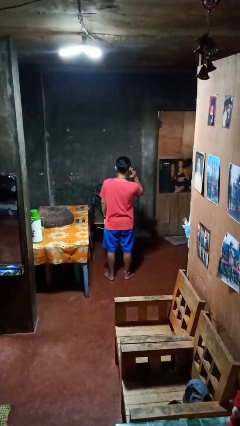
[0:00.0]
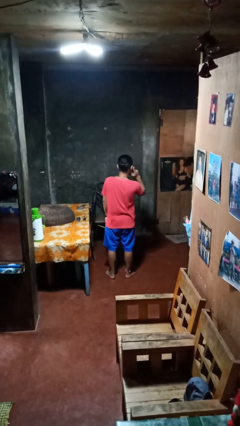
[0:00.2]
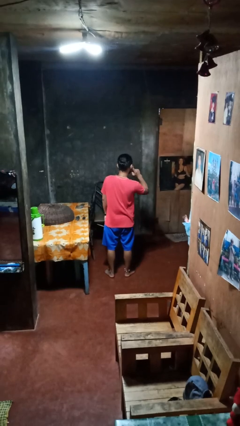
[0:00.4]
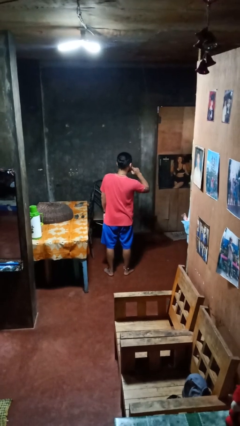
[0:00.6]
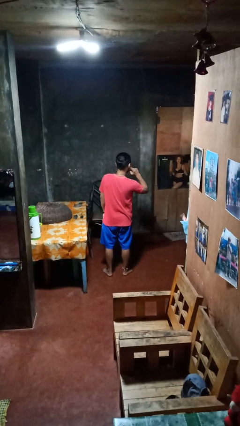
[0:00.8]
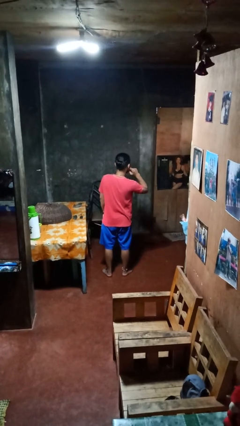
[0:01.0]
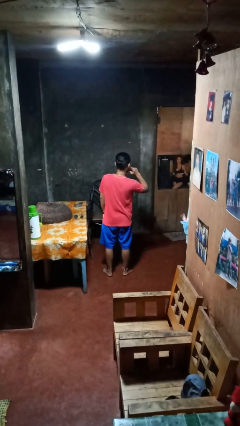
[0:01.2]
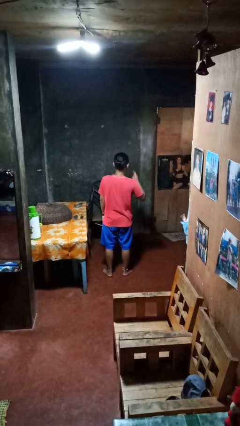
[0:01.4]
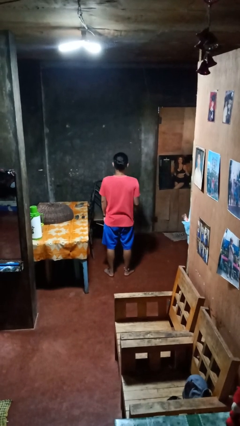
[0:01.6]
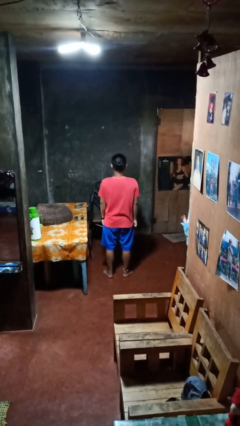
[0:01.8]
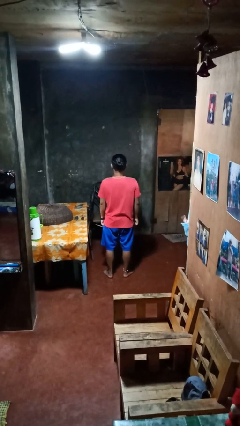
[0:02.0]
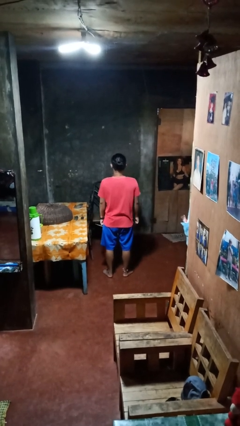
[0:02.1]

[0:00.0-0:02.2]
person gestures listen closely

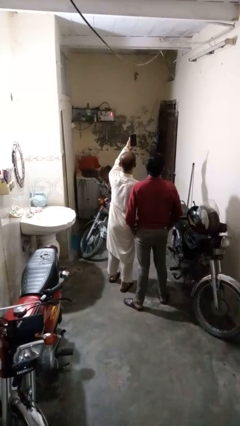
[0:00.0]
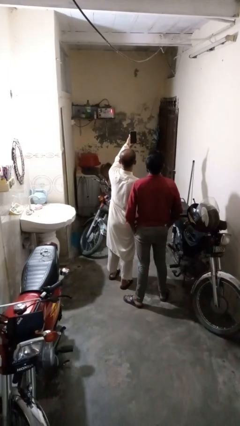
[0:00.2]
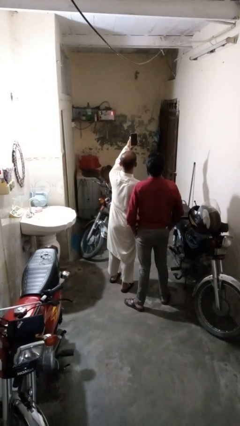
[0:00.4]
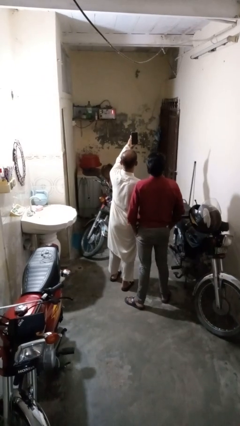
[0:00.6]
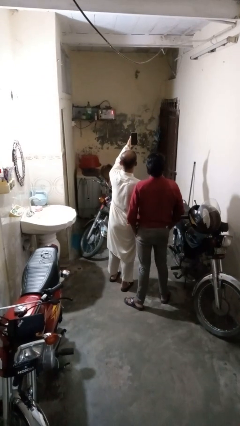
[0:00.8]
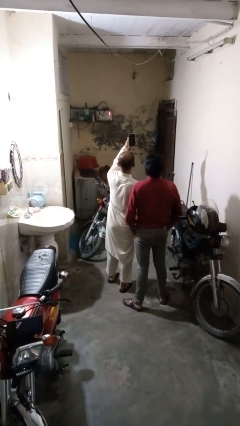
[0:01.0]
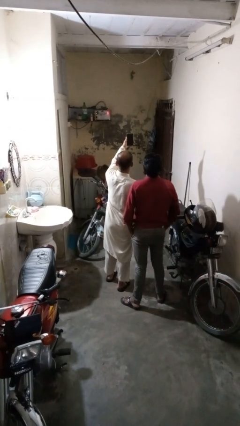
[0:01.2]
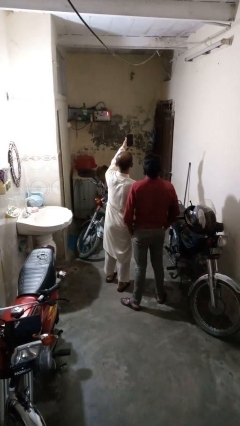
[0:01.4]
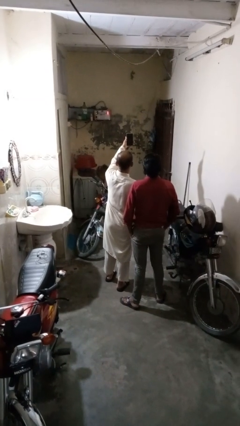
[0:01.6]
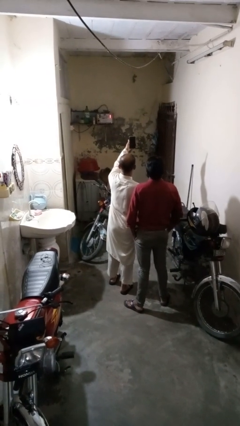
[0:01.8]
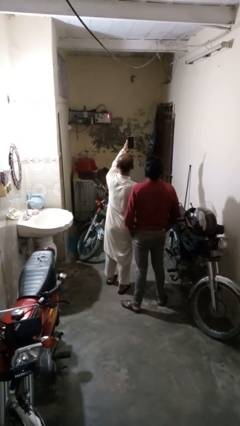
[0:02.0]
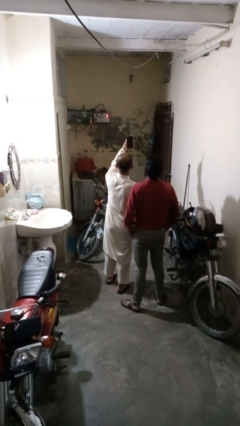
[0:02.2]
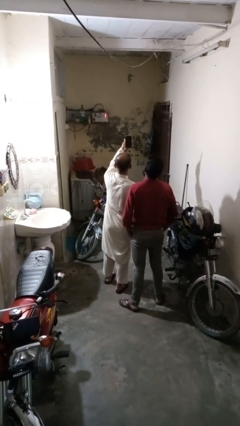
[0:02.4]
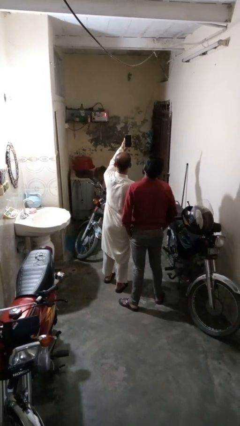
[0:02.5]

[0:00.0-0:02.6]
person takes selfie with person

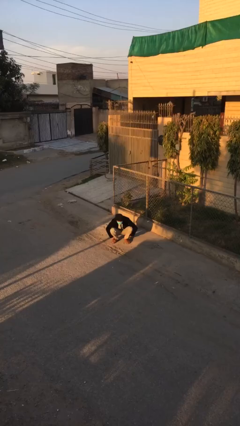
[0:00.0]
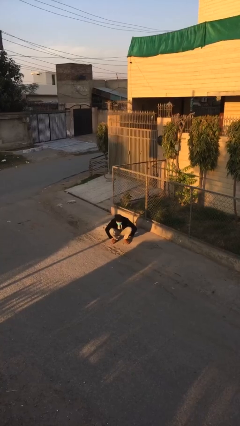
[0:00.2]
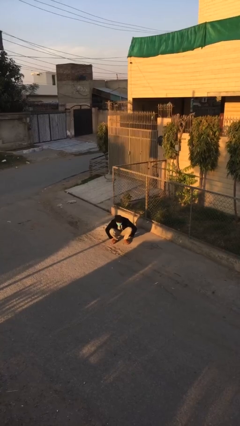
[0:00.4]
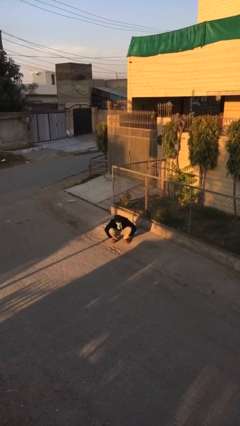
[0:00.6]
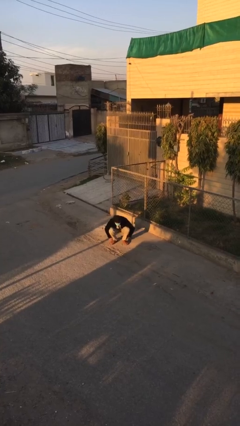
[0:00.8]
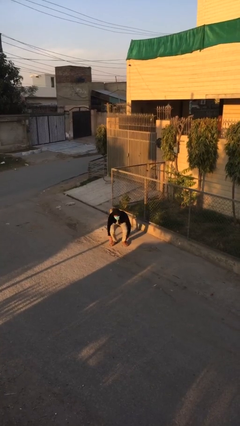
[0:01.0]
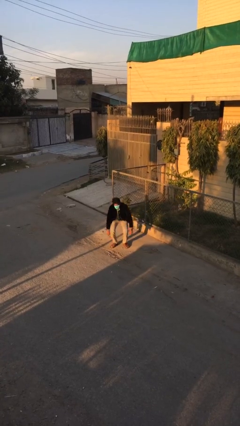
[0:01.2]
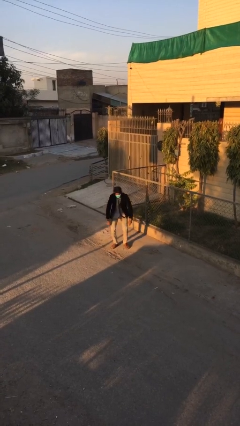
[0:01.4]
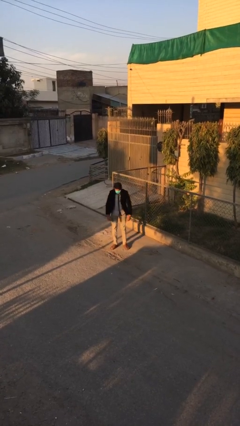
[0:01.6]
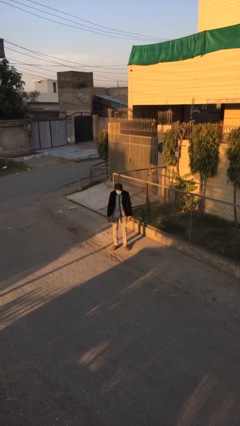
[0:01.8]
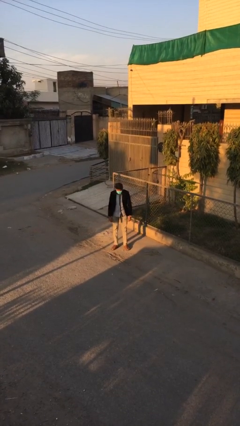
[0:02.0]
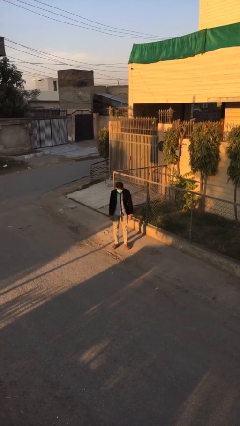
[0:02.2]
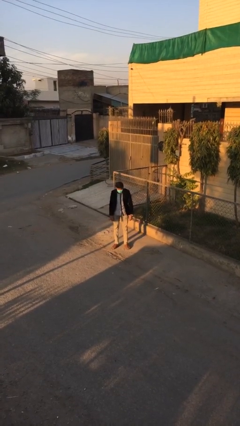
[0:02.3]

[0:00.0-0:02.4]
person stands up

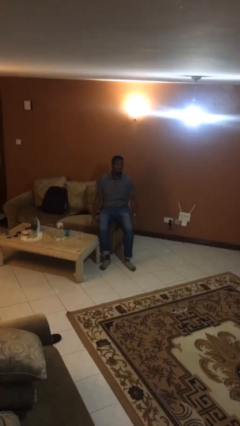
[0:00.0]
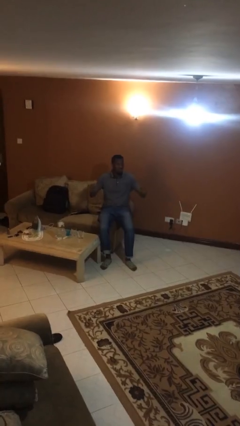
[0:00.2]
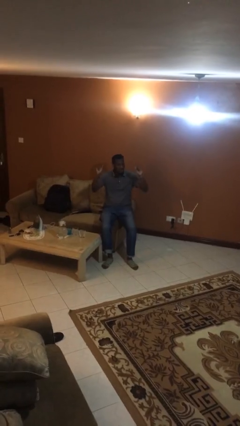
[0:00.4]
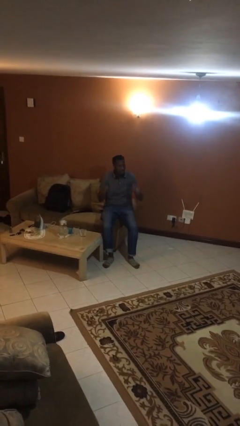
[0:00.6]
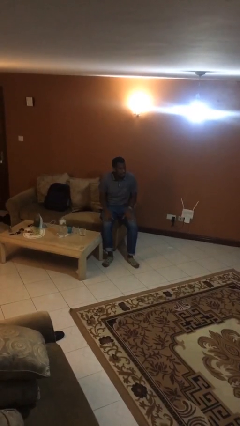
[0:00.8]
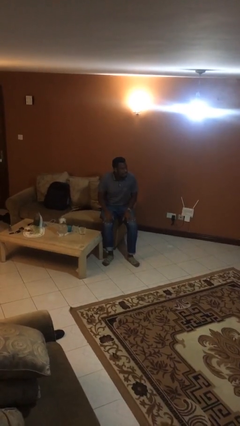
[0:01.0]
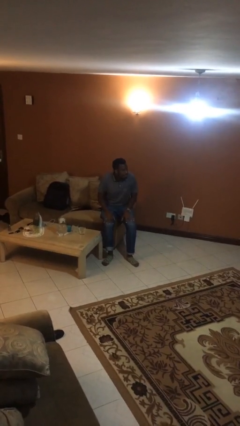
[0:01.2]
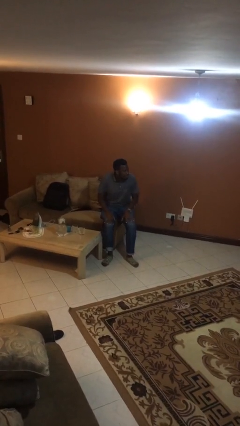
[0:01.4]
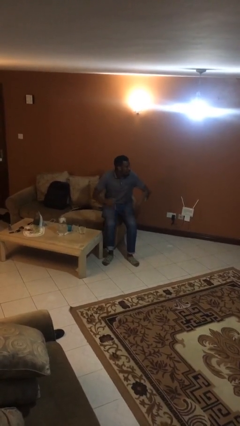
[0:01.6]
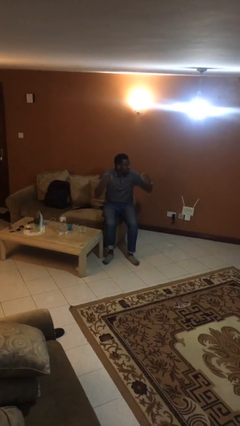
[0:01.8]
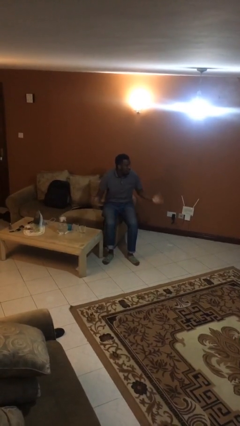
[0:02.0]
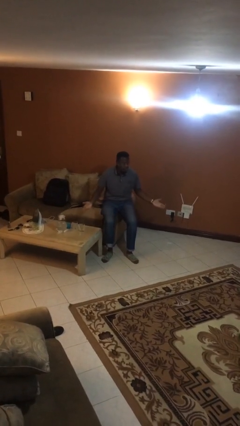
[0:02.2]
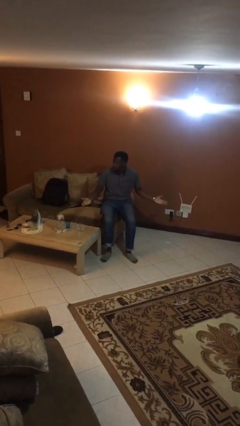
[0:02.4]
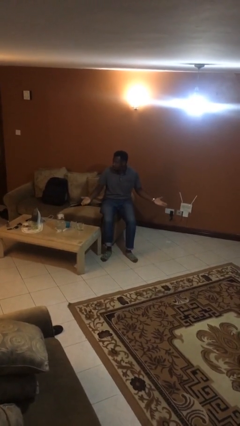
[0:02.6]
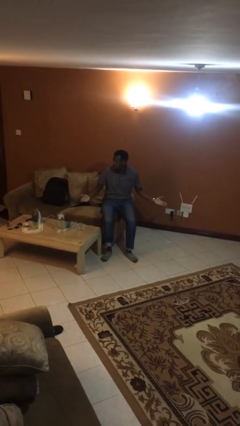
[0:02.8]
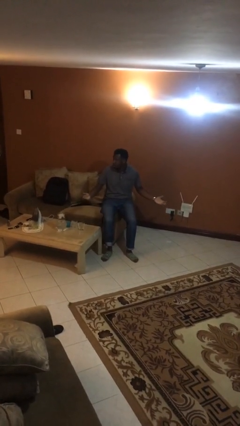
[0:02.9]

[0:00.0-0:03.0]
person slaps hands on thighs

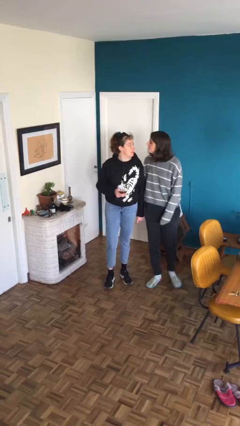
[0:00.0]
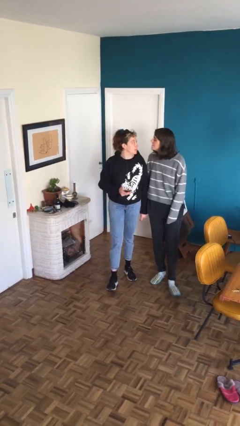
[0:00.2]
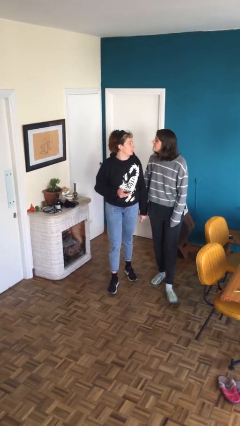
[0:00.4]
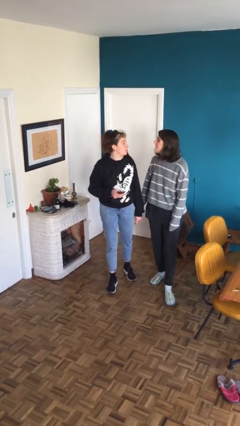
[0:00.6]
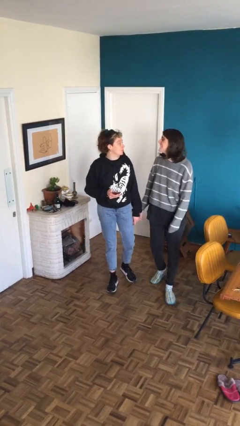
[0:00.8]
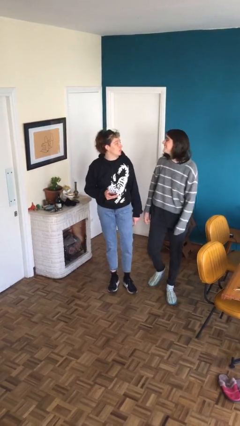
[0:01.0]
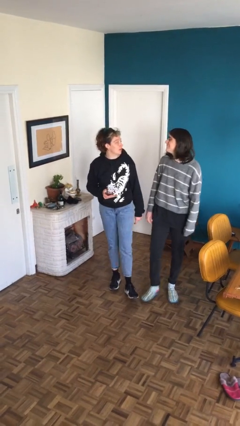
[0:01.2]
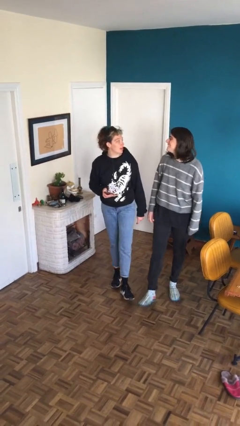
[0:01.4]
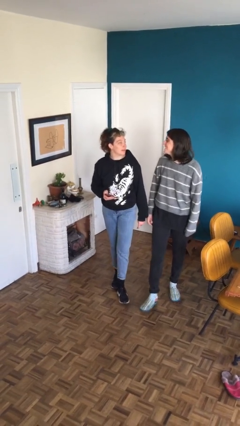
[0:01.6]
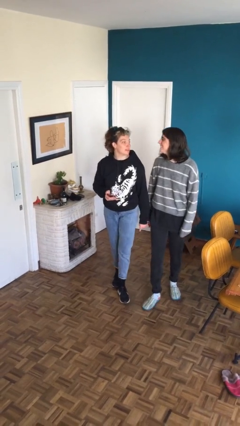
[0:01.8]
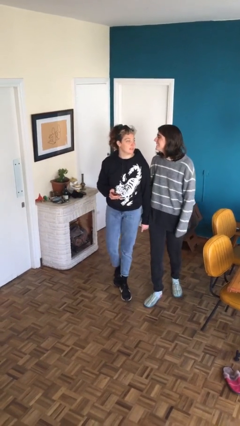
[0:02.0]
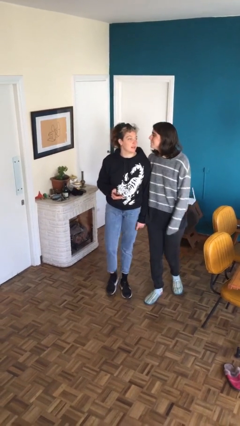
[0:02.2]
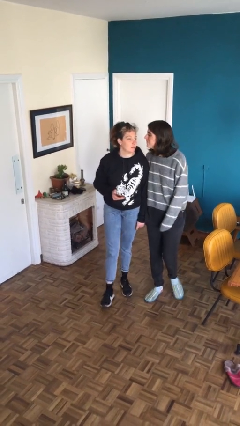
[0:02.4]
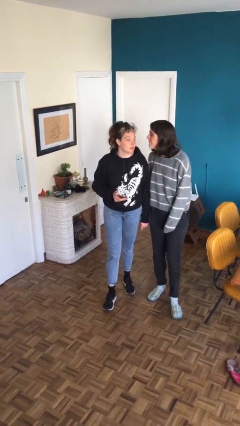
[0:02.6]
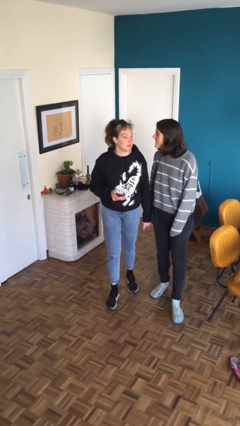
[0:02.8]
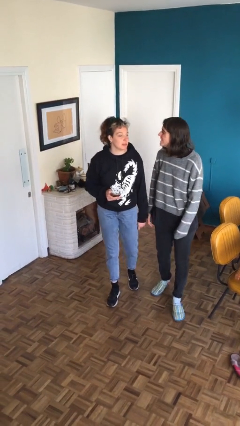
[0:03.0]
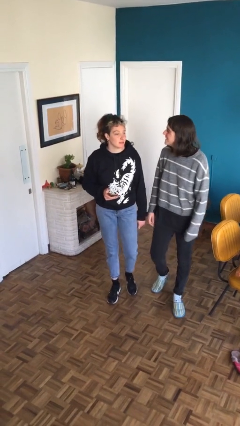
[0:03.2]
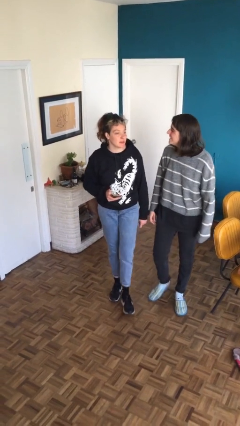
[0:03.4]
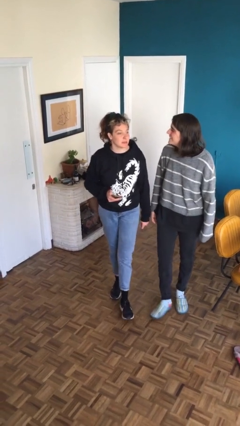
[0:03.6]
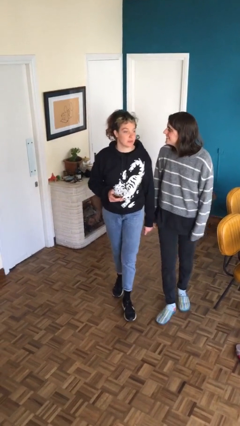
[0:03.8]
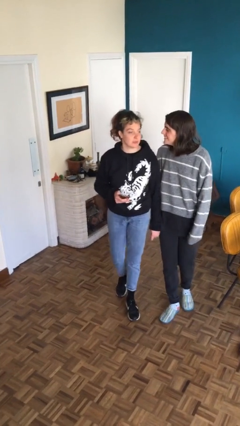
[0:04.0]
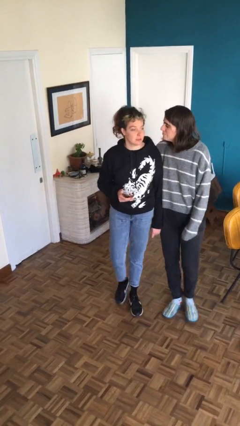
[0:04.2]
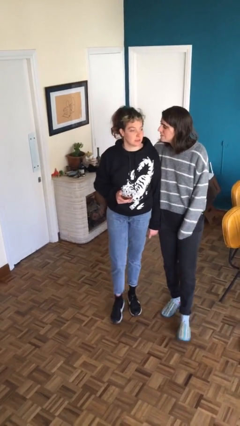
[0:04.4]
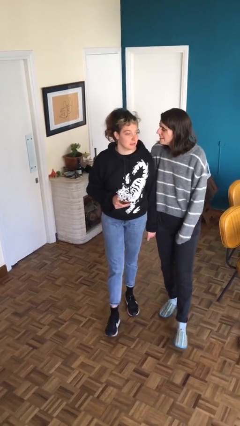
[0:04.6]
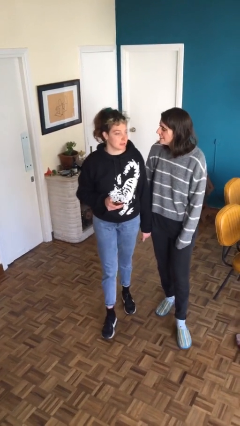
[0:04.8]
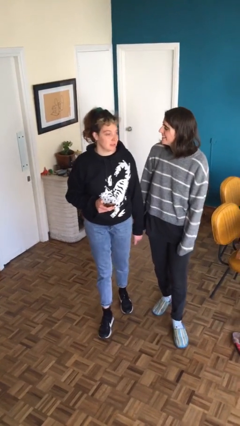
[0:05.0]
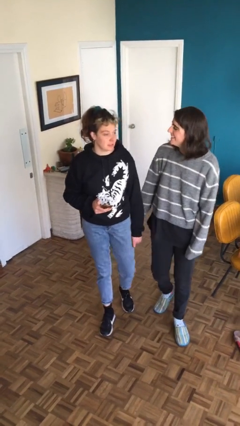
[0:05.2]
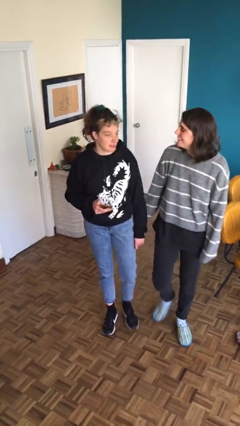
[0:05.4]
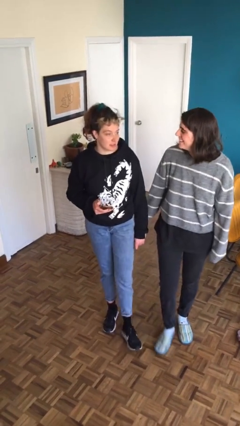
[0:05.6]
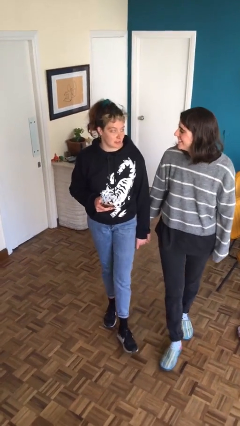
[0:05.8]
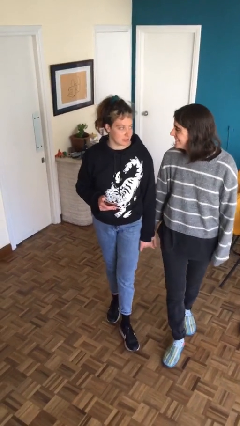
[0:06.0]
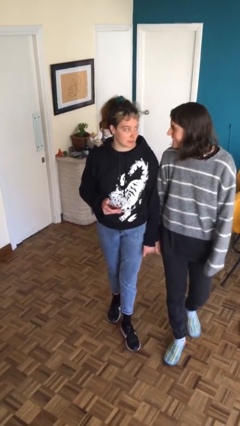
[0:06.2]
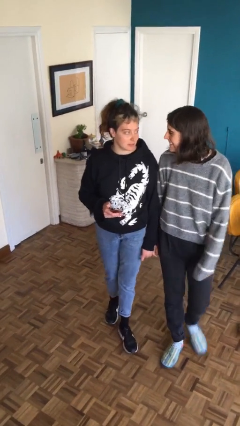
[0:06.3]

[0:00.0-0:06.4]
person talks to person

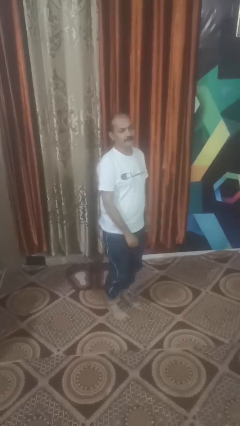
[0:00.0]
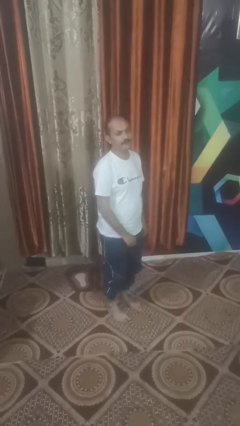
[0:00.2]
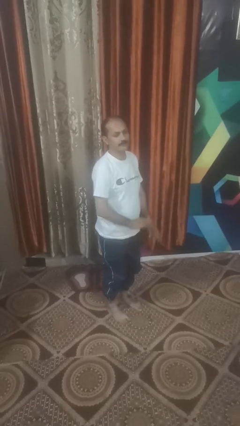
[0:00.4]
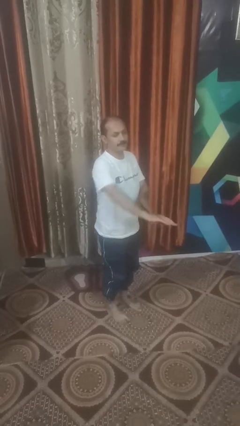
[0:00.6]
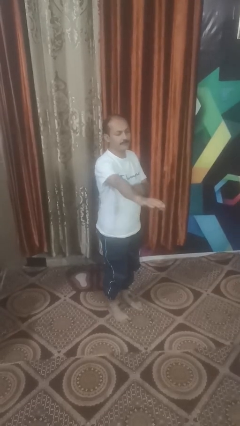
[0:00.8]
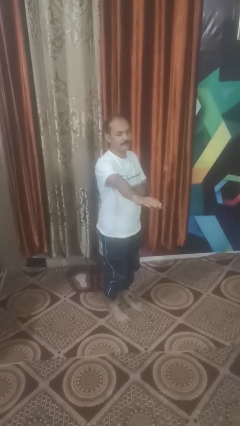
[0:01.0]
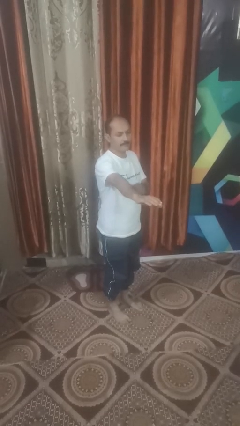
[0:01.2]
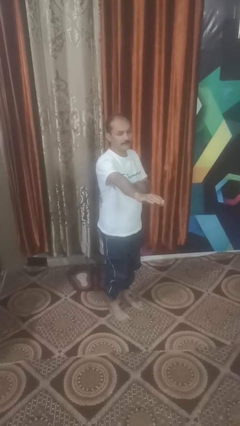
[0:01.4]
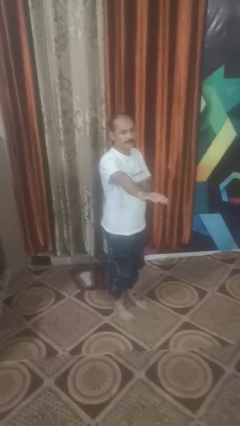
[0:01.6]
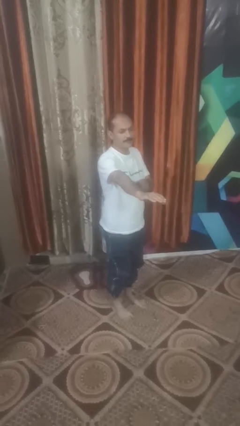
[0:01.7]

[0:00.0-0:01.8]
person karate chop
